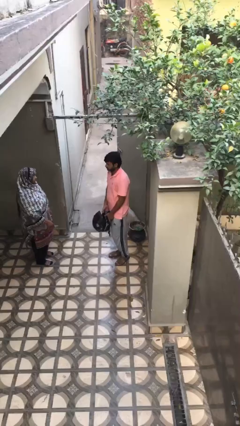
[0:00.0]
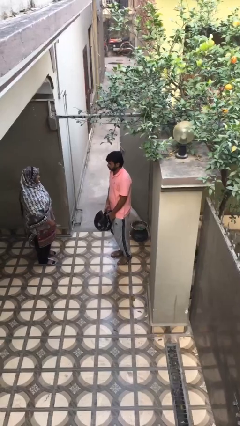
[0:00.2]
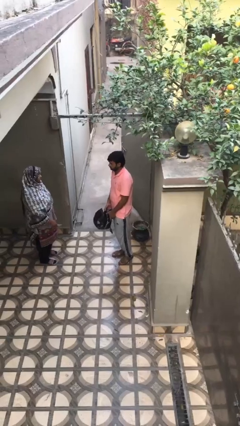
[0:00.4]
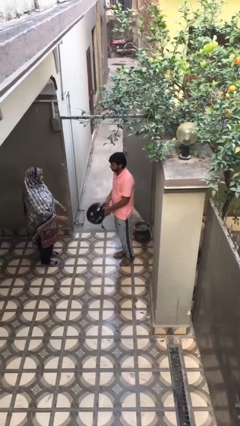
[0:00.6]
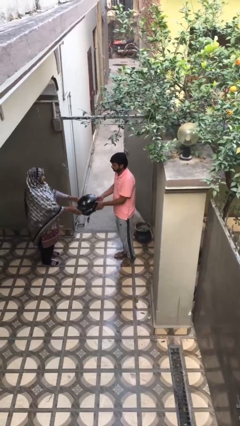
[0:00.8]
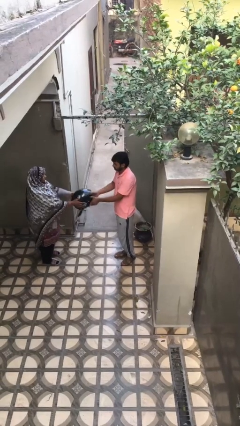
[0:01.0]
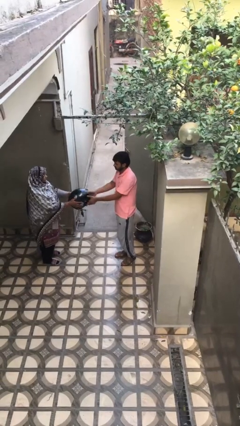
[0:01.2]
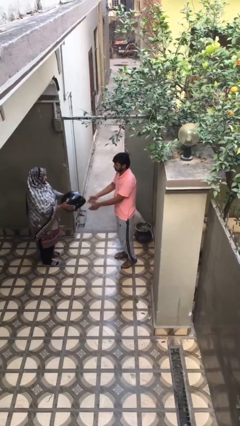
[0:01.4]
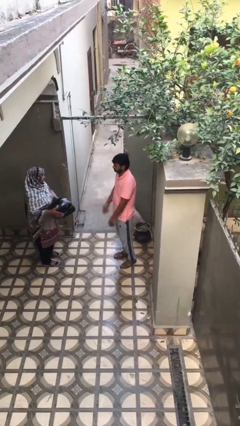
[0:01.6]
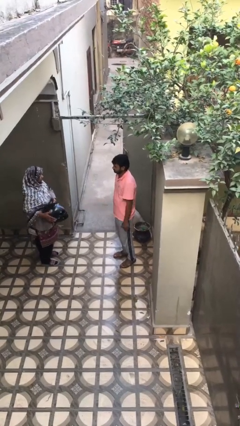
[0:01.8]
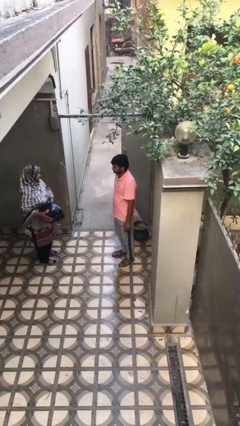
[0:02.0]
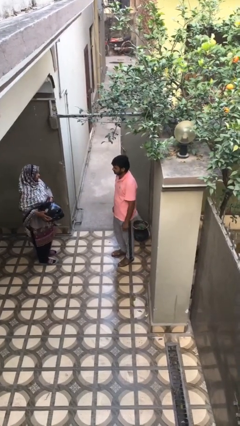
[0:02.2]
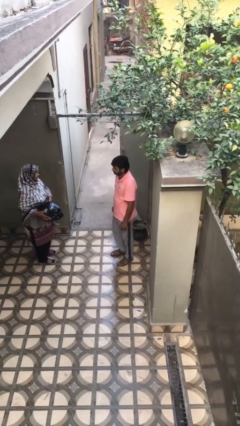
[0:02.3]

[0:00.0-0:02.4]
person transfers object to person

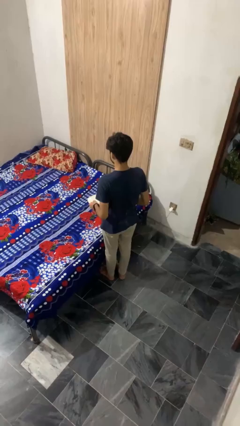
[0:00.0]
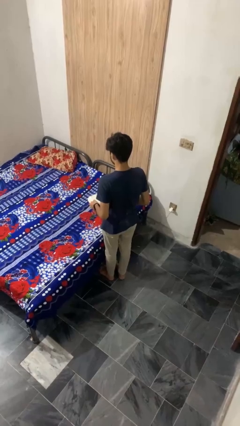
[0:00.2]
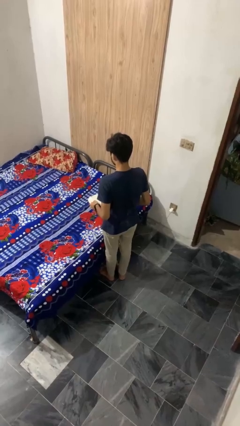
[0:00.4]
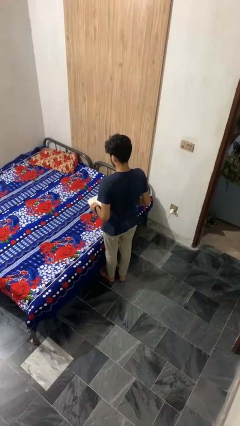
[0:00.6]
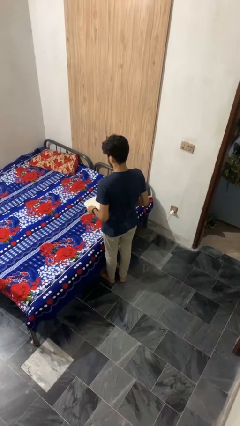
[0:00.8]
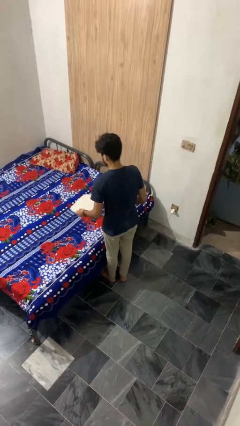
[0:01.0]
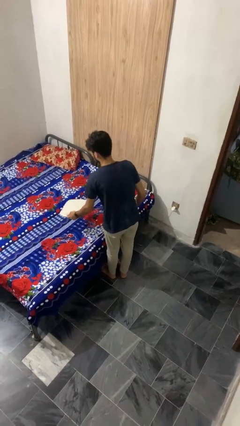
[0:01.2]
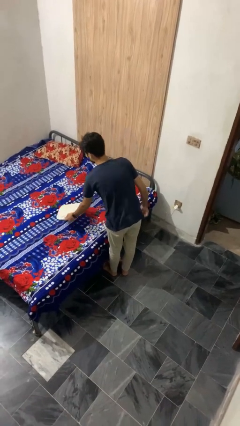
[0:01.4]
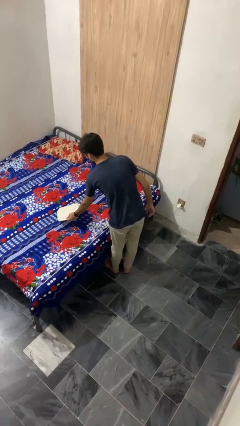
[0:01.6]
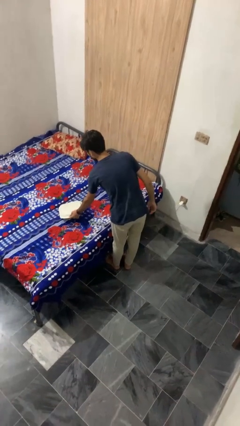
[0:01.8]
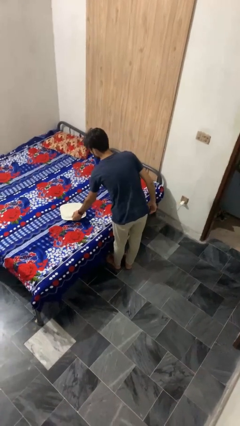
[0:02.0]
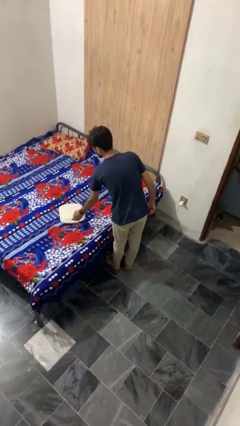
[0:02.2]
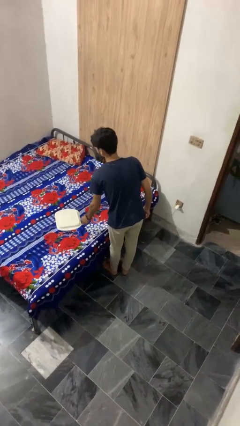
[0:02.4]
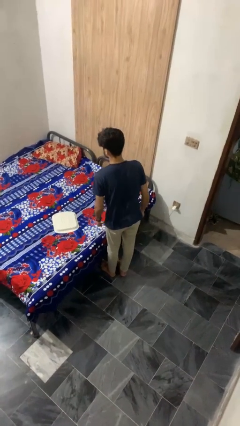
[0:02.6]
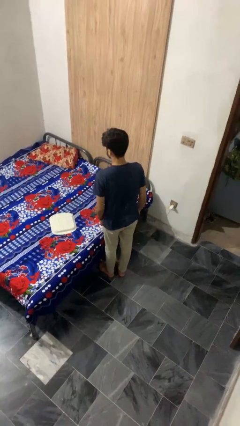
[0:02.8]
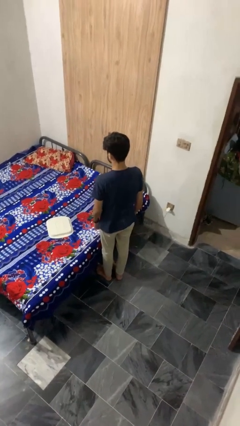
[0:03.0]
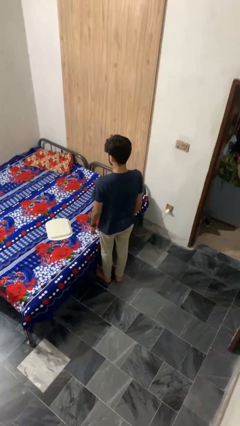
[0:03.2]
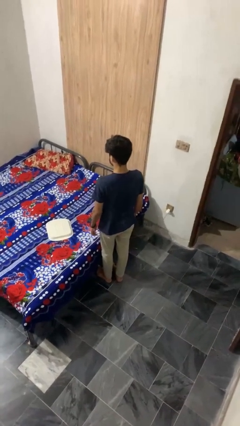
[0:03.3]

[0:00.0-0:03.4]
person puts down object on bed

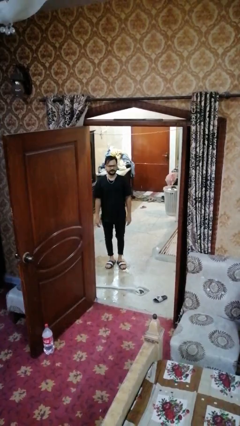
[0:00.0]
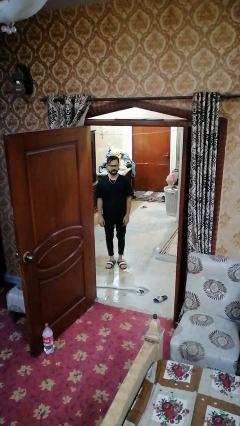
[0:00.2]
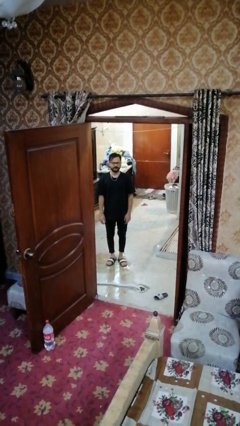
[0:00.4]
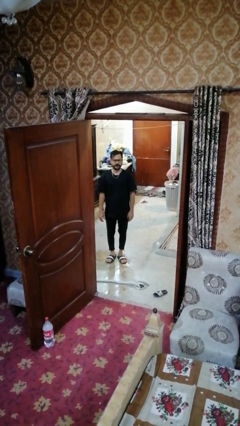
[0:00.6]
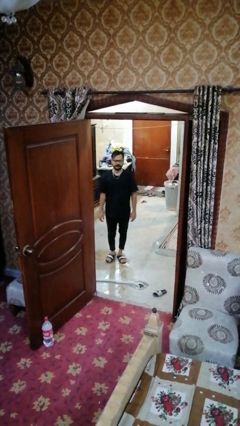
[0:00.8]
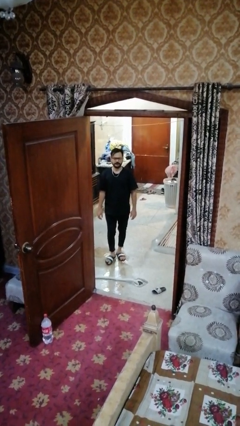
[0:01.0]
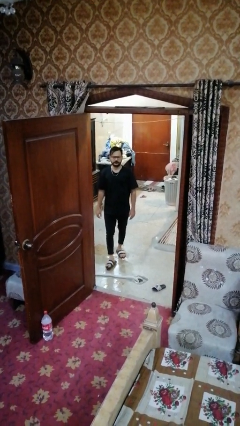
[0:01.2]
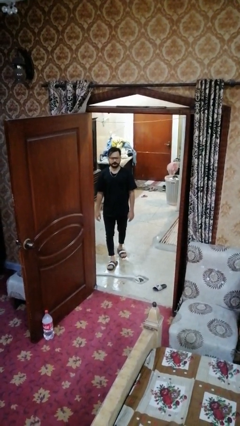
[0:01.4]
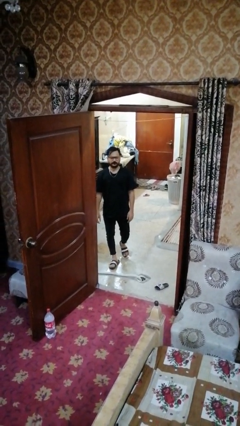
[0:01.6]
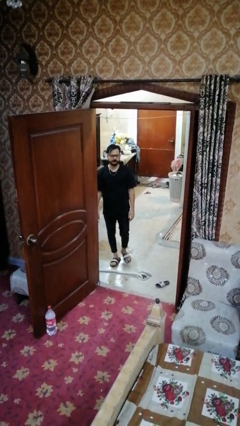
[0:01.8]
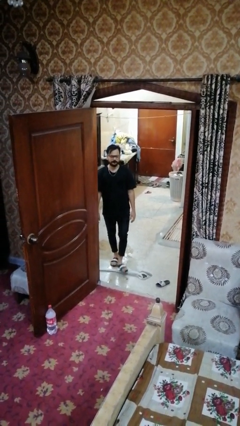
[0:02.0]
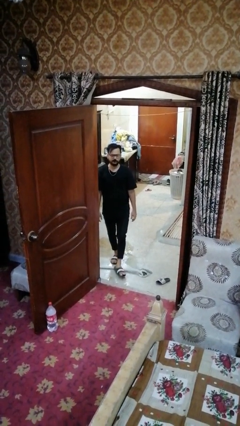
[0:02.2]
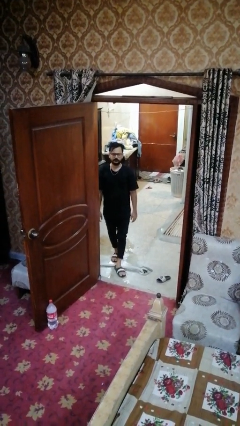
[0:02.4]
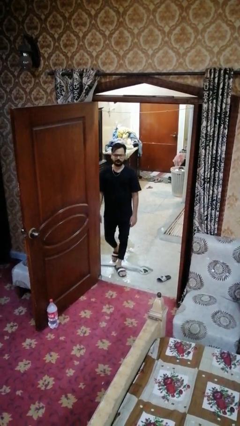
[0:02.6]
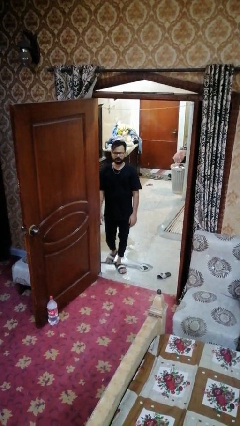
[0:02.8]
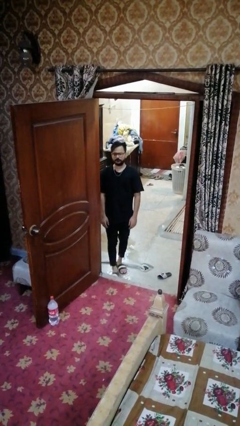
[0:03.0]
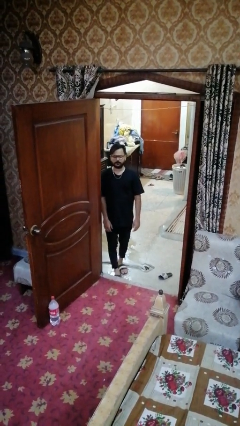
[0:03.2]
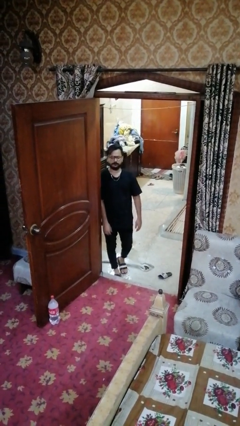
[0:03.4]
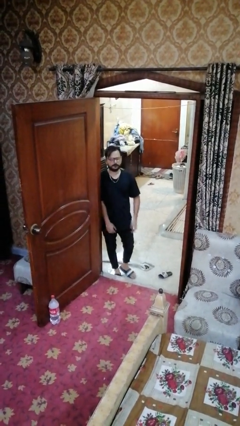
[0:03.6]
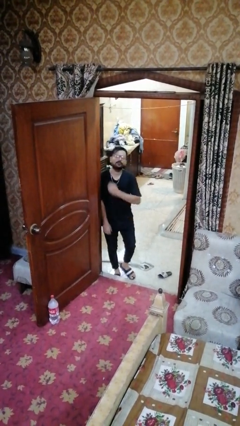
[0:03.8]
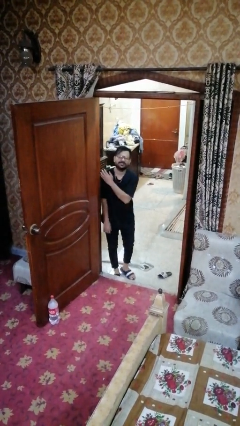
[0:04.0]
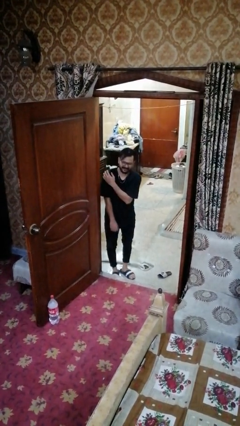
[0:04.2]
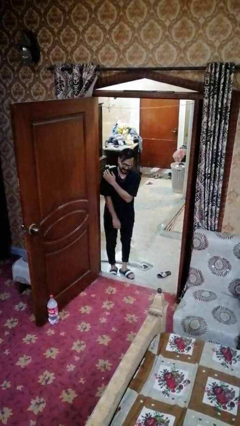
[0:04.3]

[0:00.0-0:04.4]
person bumps into wall

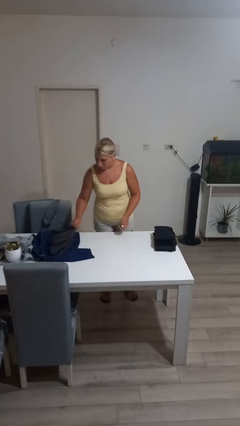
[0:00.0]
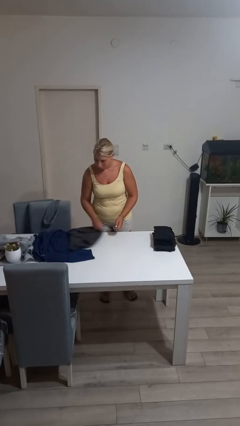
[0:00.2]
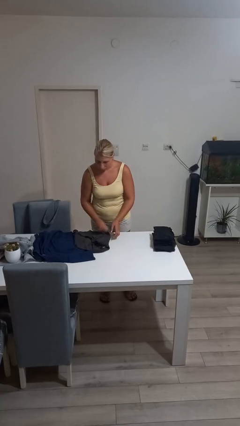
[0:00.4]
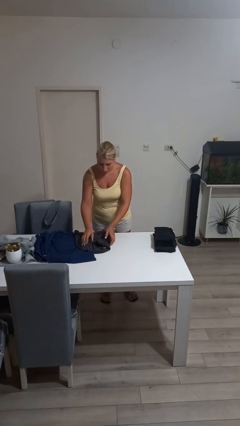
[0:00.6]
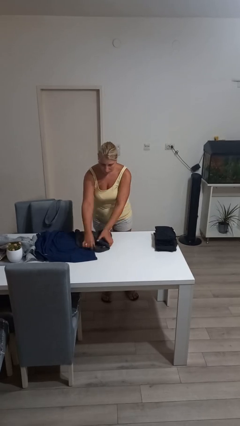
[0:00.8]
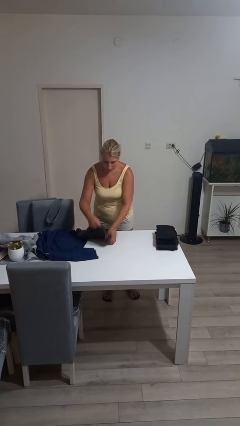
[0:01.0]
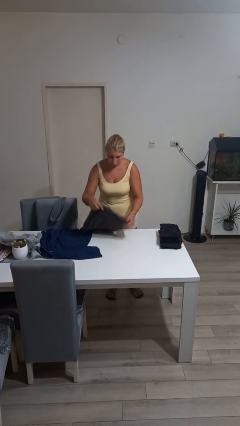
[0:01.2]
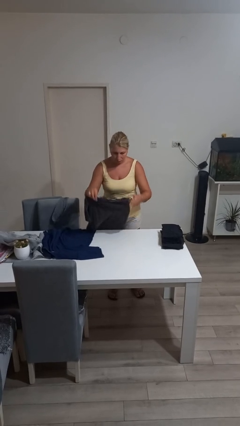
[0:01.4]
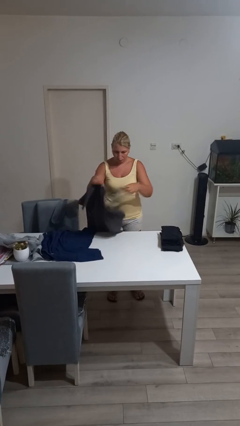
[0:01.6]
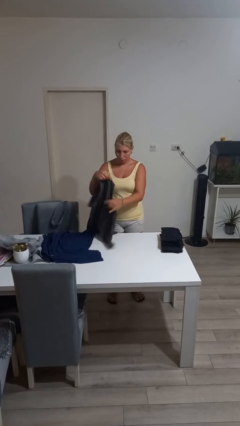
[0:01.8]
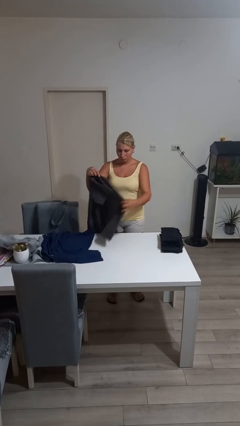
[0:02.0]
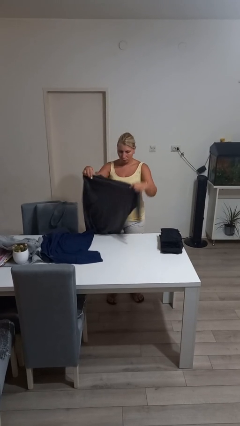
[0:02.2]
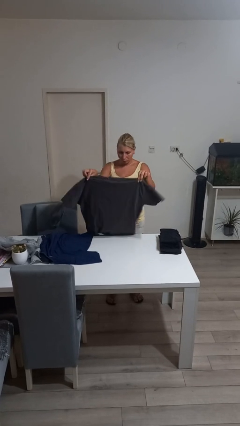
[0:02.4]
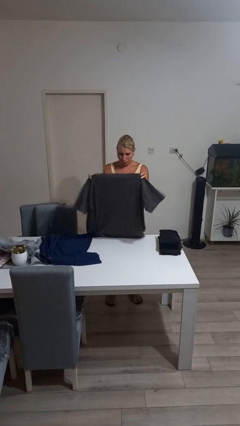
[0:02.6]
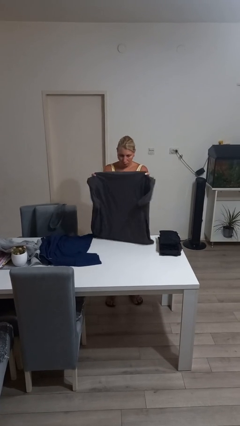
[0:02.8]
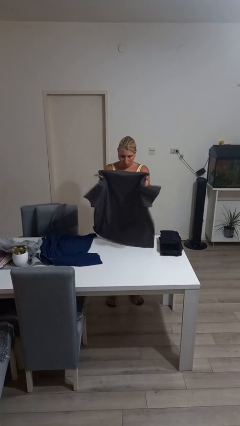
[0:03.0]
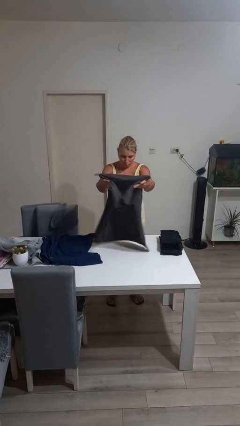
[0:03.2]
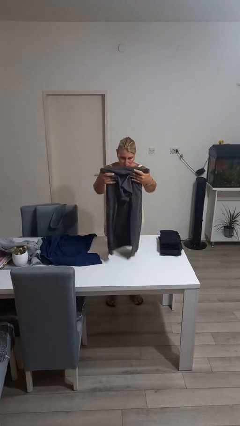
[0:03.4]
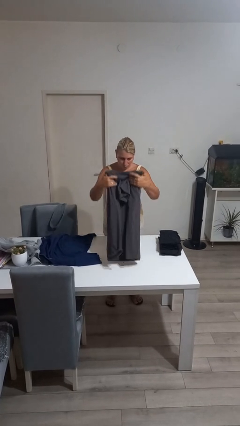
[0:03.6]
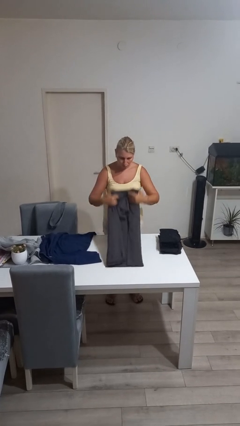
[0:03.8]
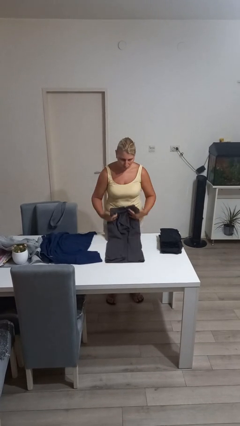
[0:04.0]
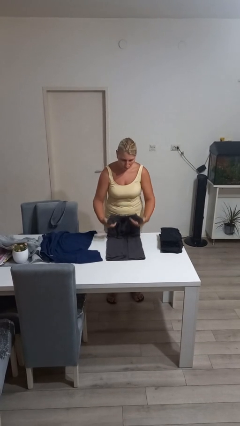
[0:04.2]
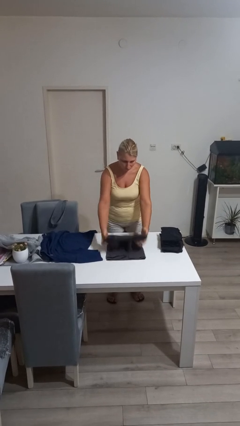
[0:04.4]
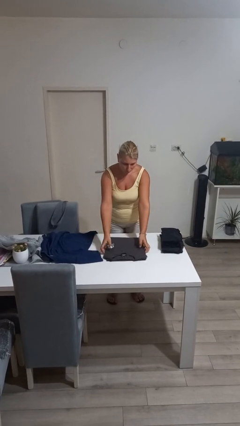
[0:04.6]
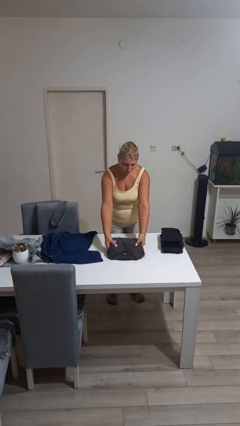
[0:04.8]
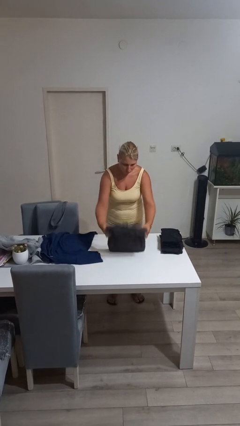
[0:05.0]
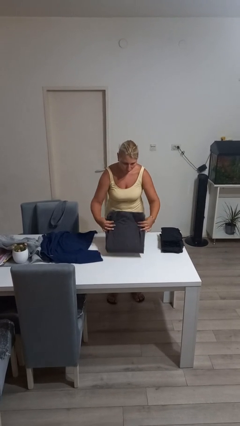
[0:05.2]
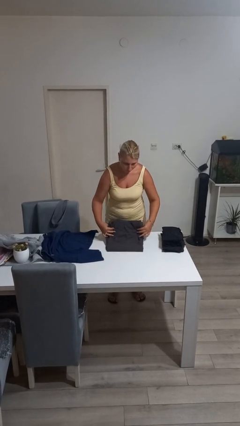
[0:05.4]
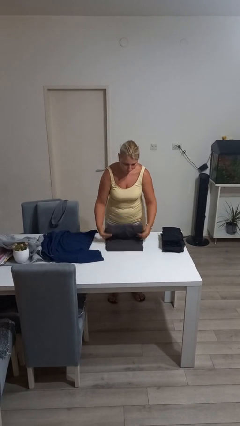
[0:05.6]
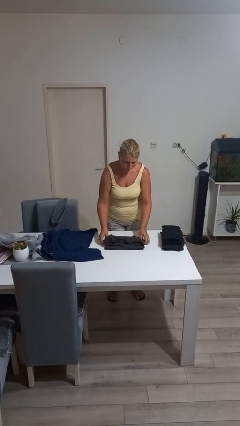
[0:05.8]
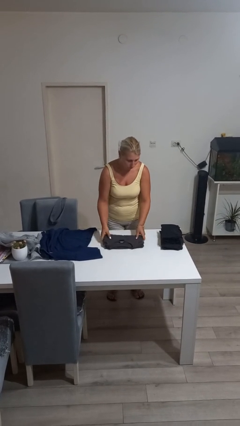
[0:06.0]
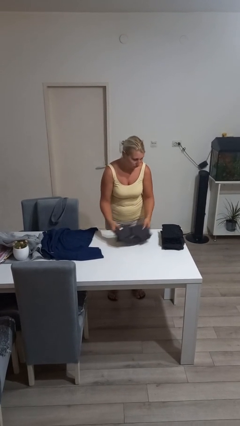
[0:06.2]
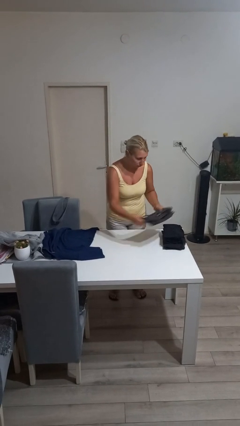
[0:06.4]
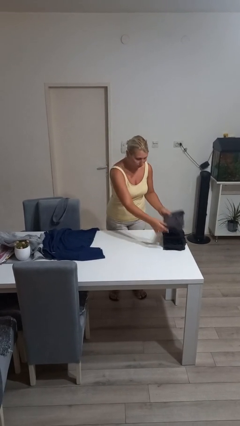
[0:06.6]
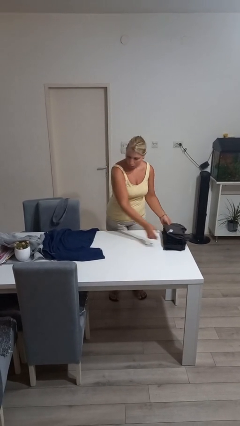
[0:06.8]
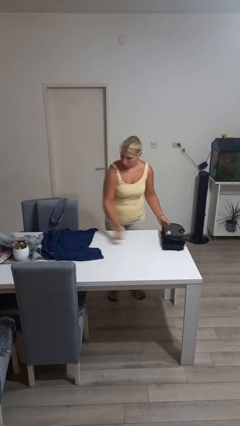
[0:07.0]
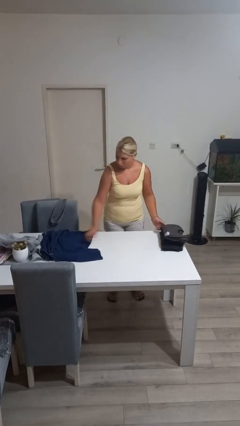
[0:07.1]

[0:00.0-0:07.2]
person folds shirt
